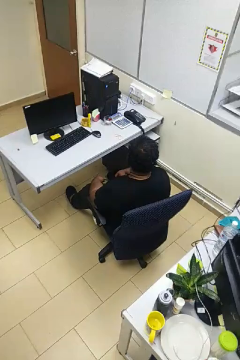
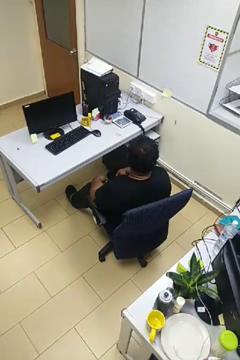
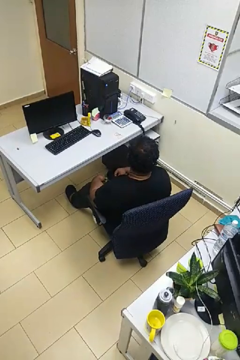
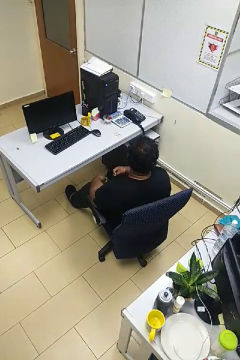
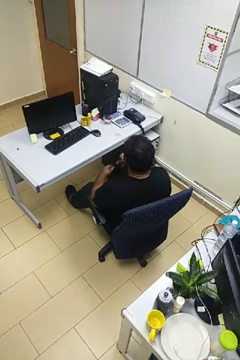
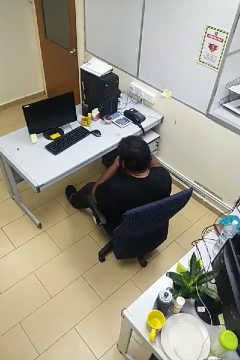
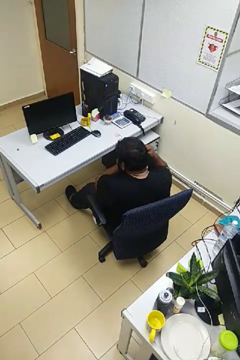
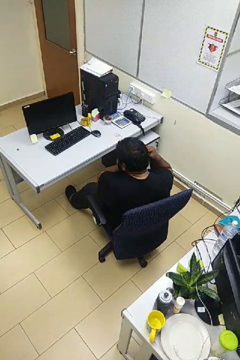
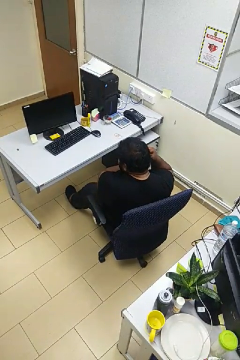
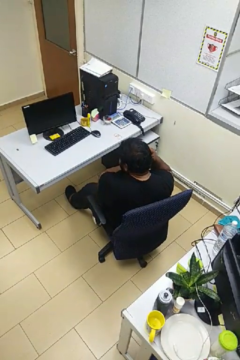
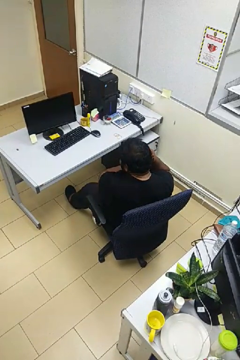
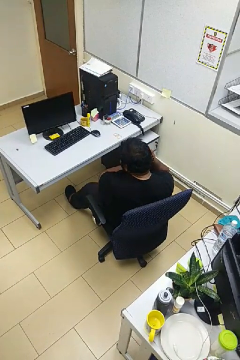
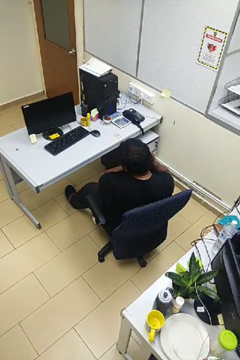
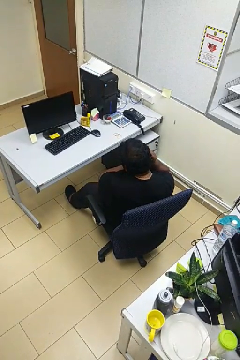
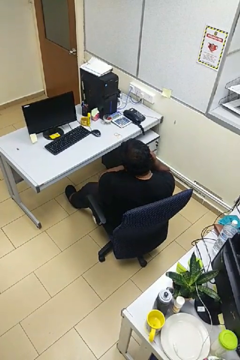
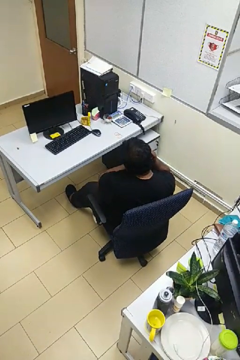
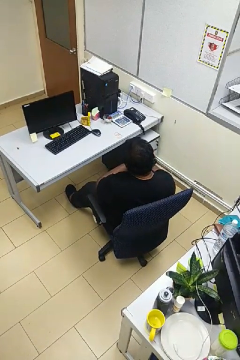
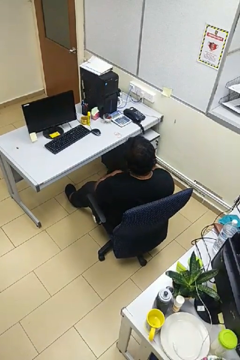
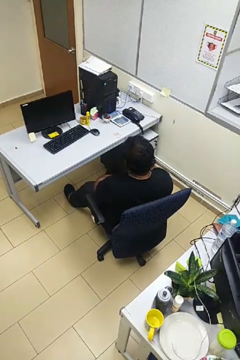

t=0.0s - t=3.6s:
person puts on earrings

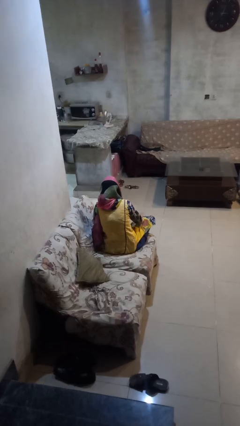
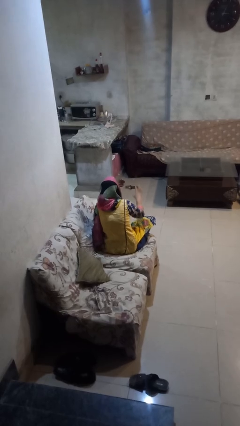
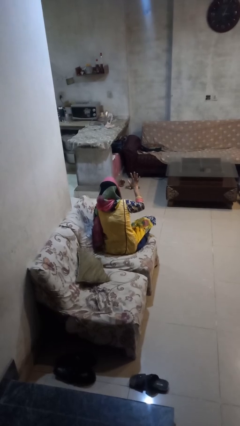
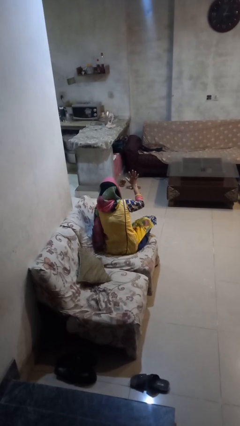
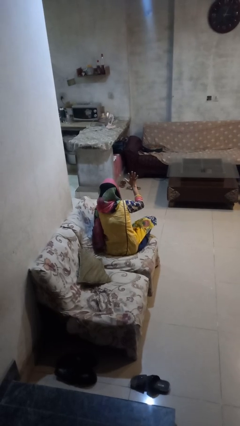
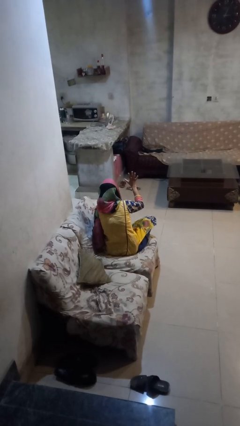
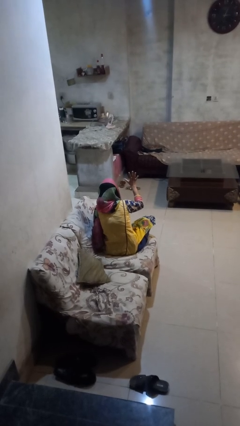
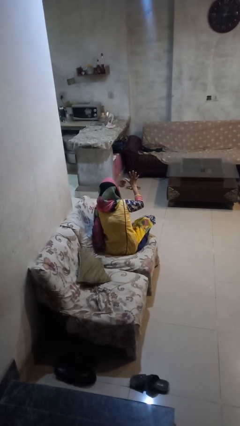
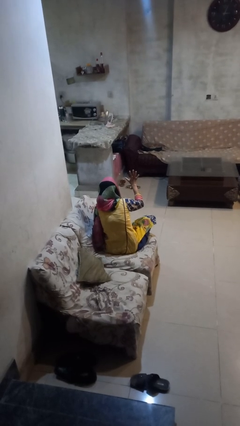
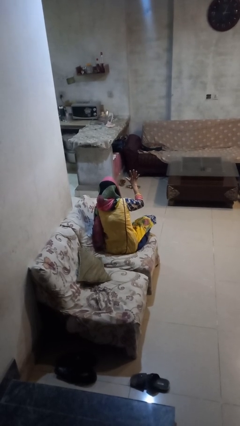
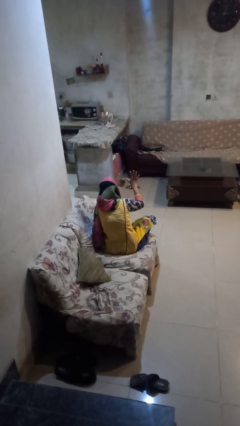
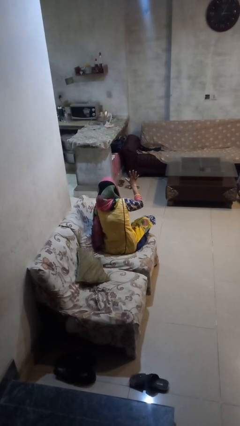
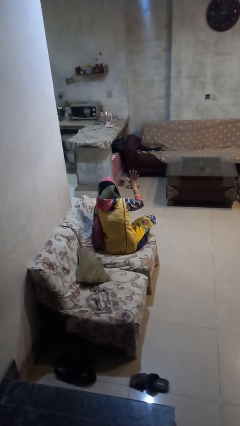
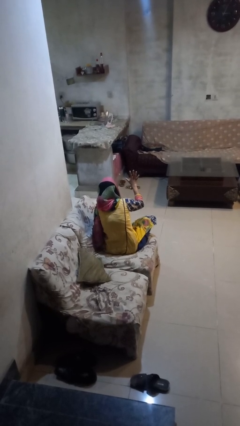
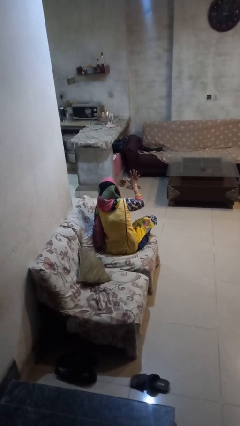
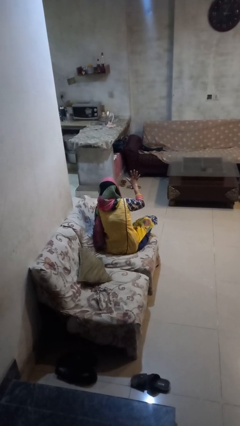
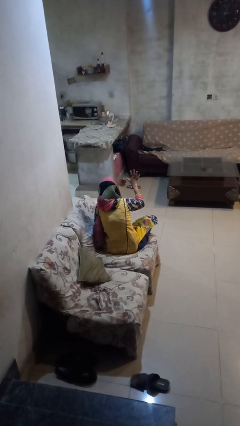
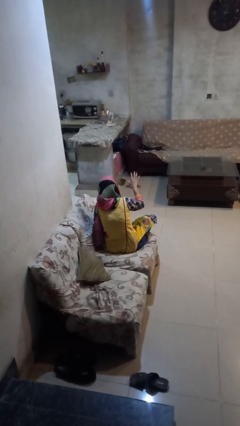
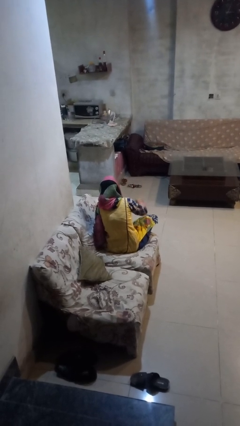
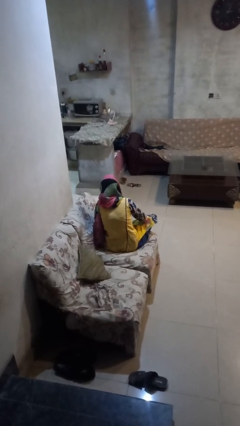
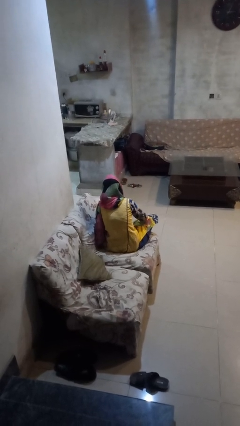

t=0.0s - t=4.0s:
person gestures number five

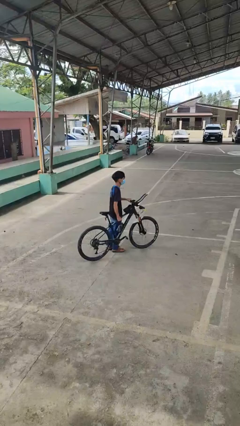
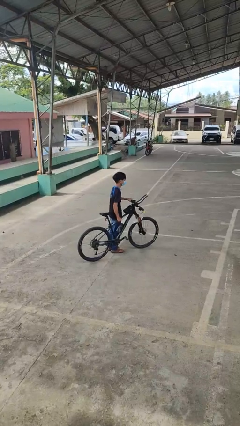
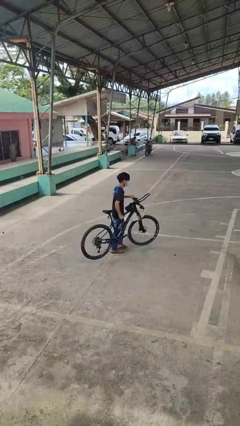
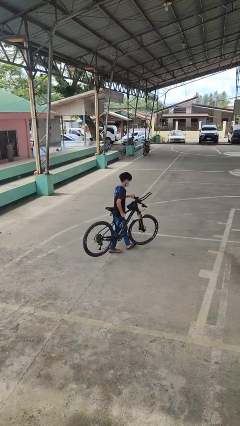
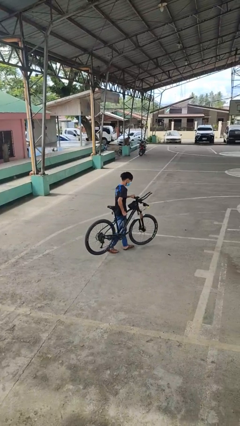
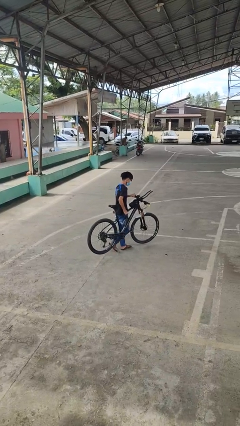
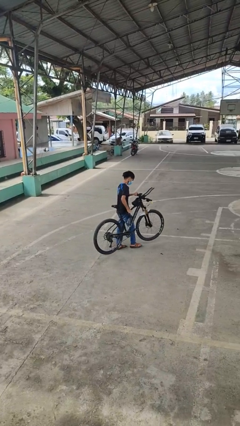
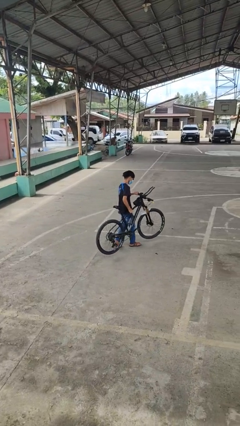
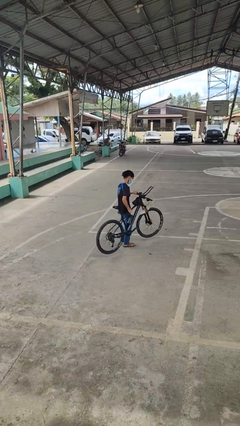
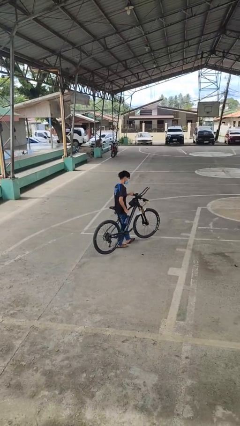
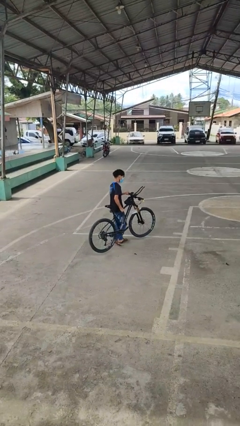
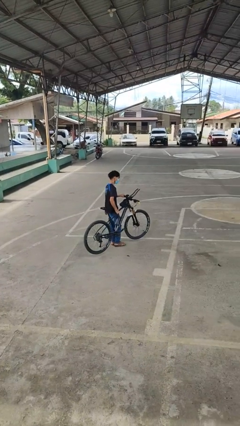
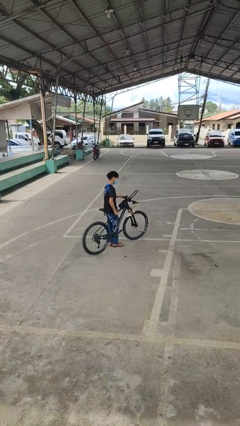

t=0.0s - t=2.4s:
person carries bicycle

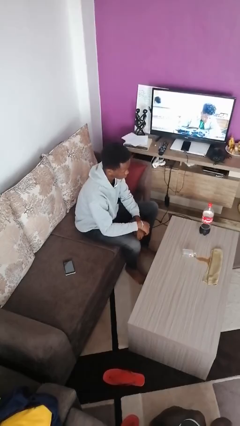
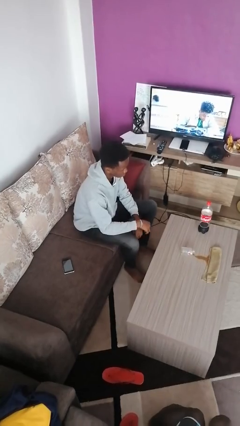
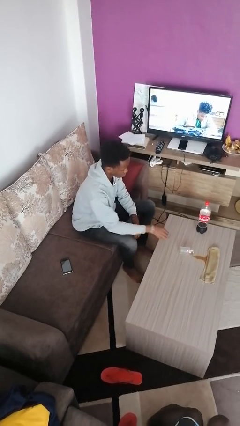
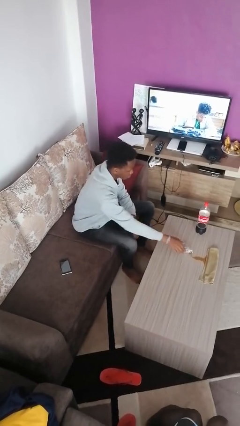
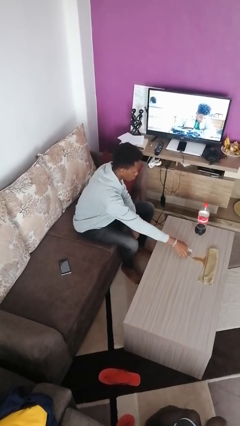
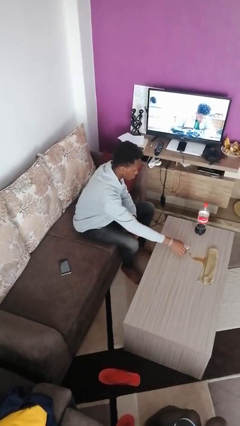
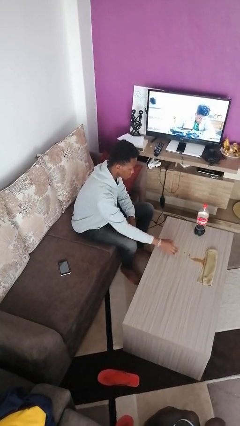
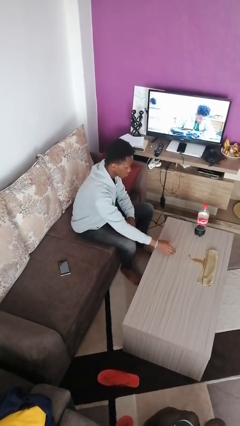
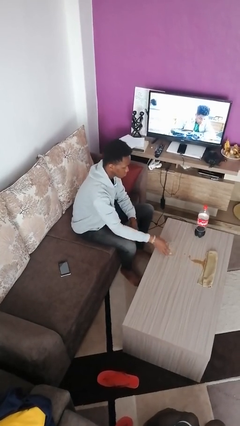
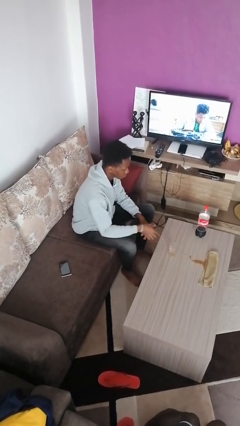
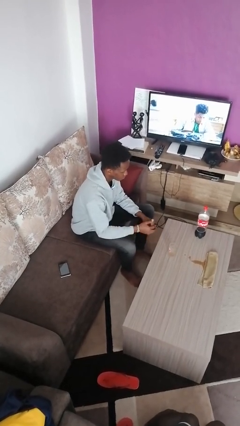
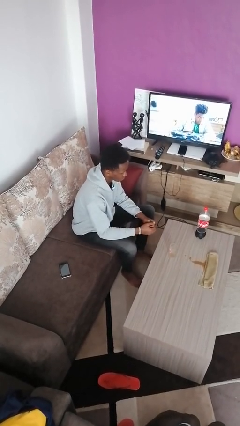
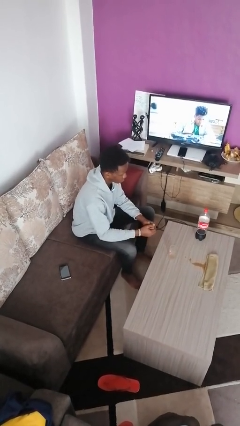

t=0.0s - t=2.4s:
person sets upright glass

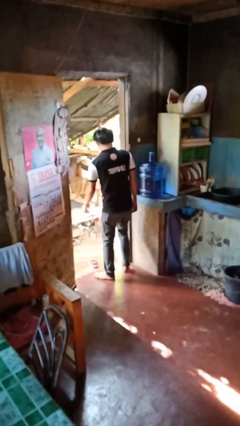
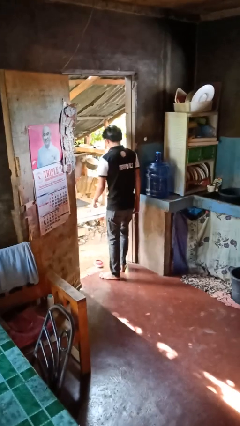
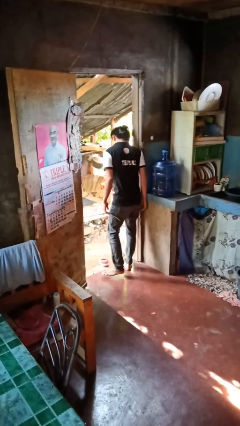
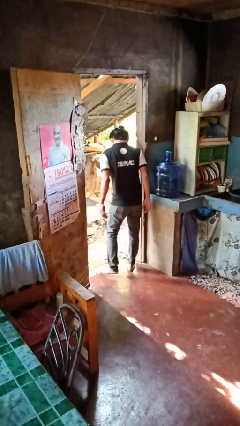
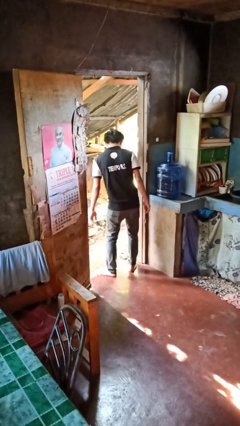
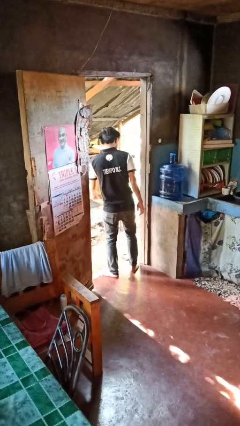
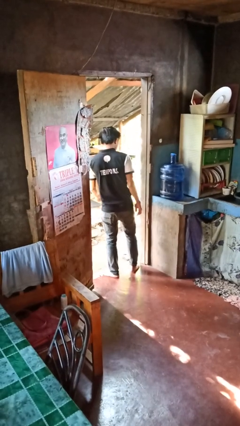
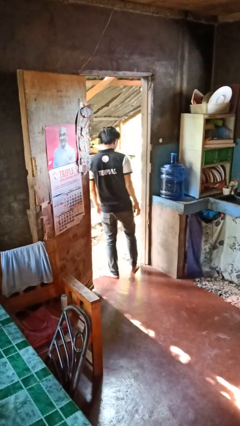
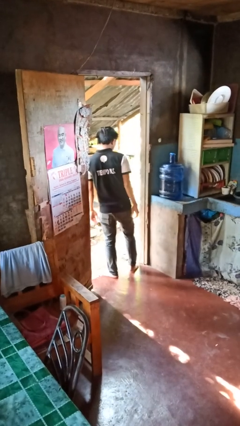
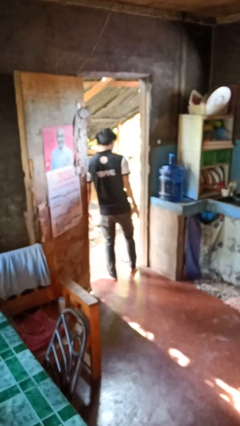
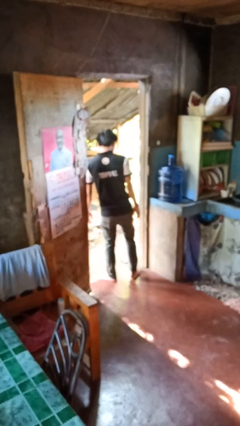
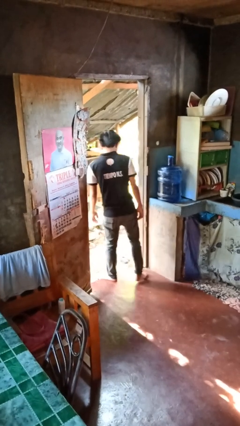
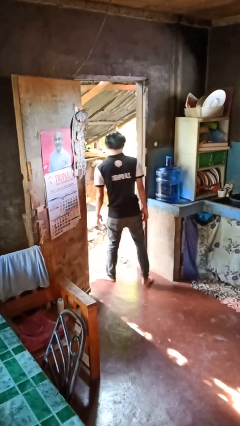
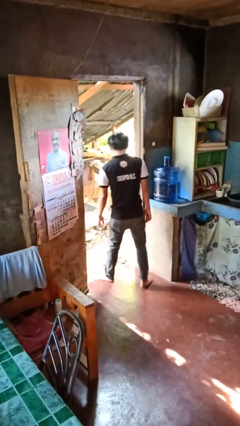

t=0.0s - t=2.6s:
person bumps into wall

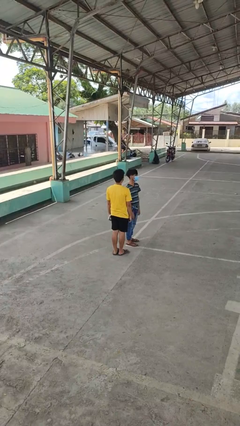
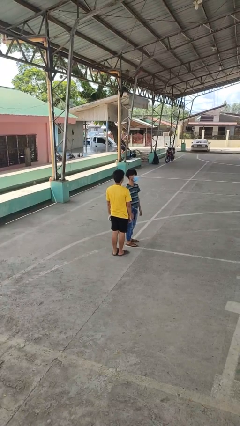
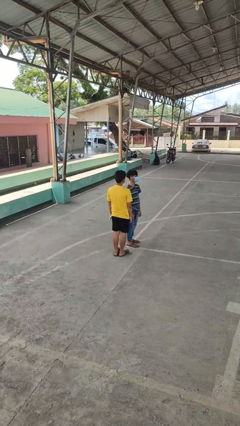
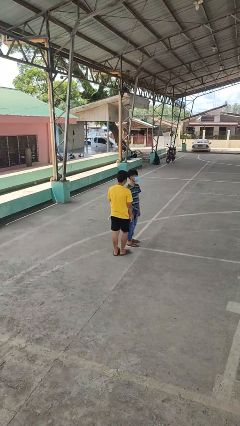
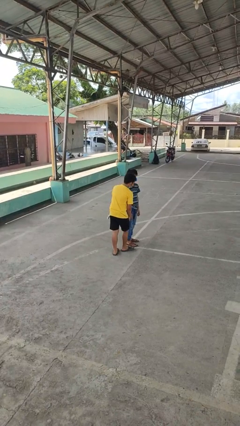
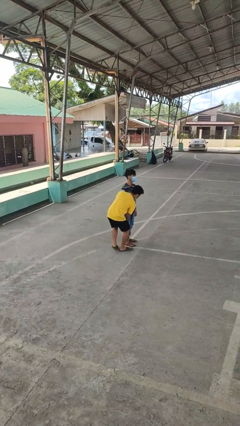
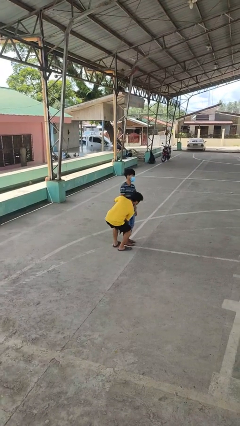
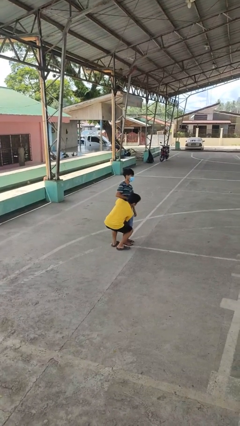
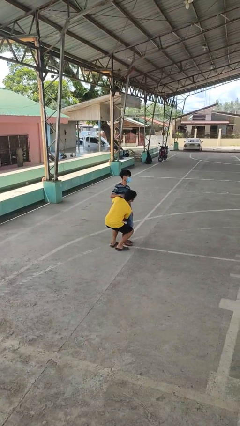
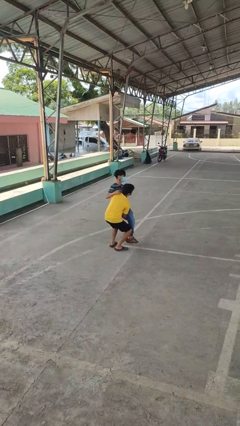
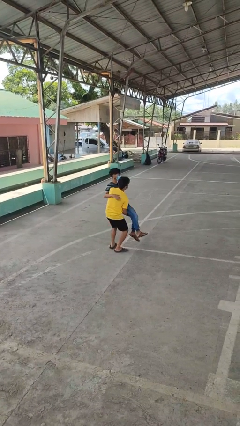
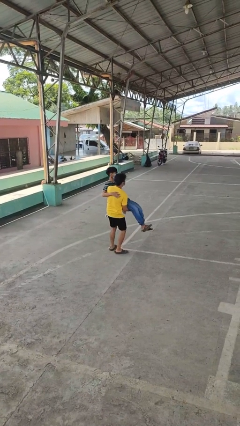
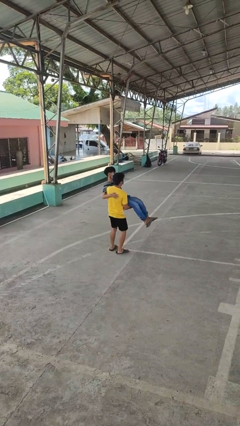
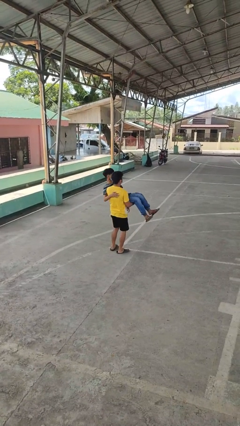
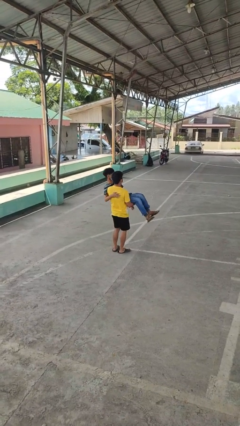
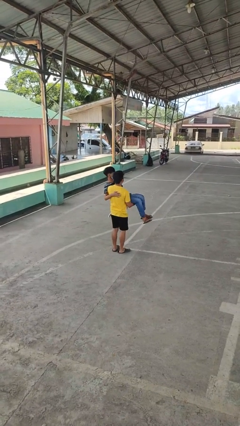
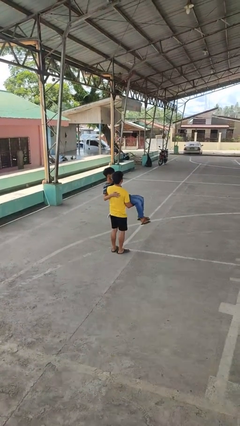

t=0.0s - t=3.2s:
person picks up person
